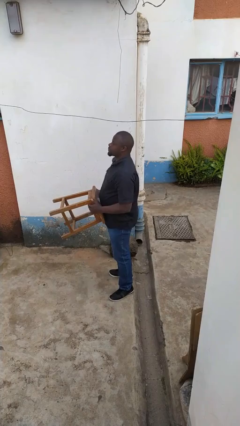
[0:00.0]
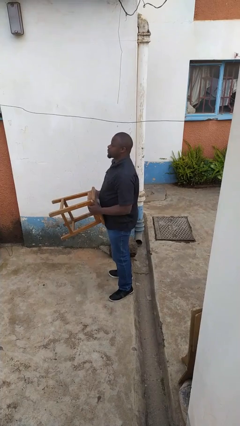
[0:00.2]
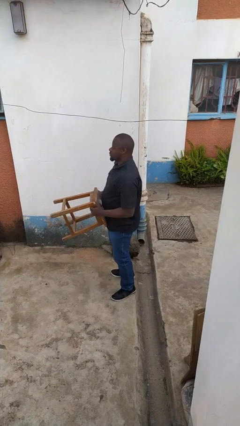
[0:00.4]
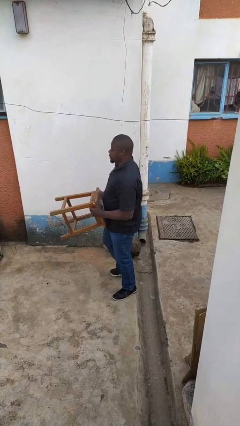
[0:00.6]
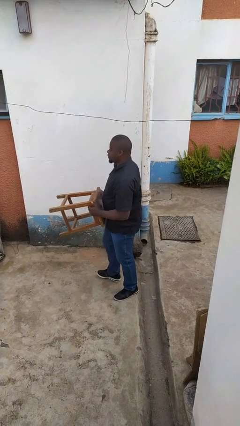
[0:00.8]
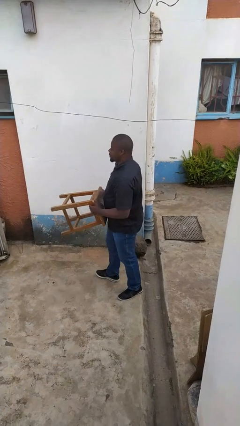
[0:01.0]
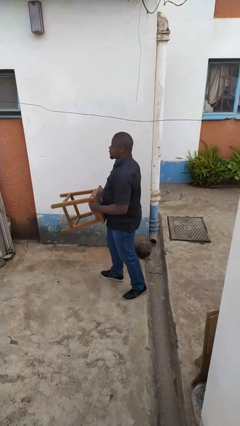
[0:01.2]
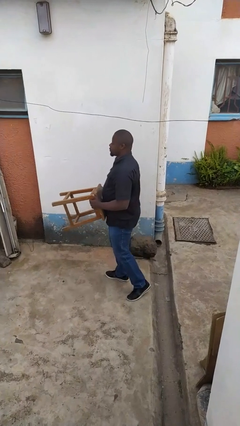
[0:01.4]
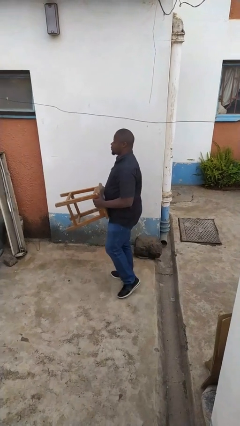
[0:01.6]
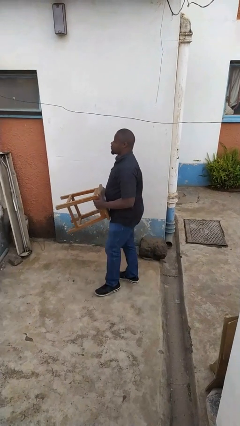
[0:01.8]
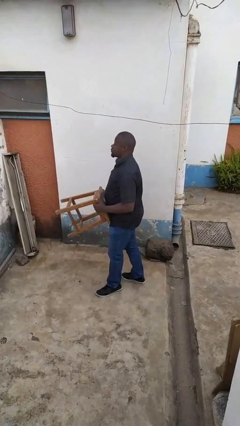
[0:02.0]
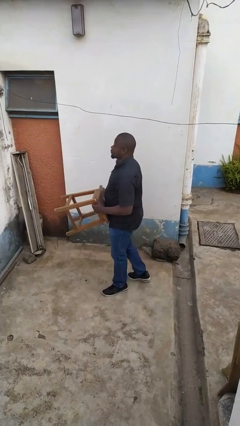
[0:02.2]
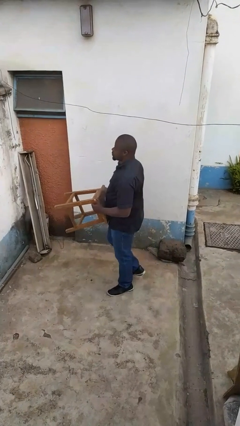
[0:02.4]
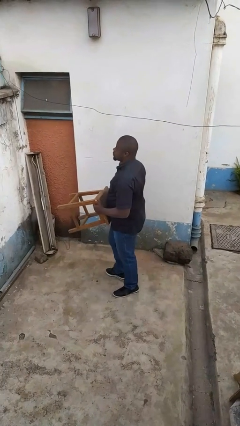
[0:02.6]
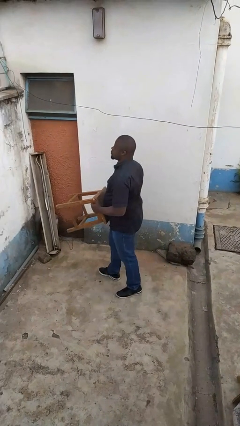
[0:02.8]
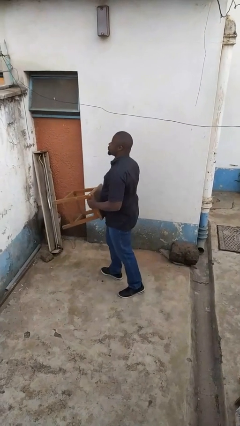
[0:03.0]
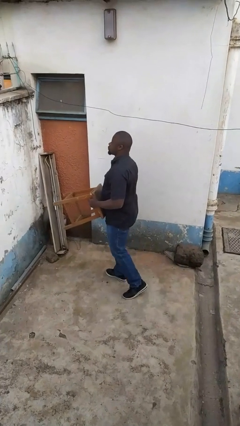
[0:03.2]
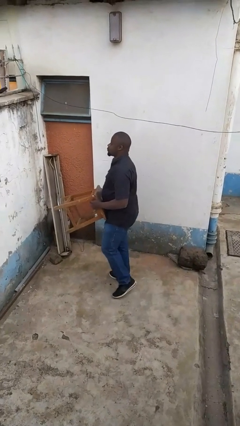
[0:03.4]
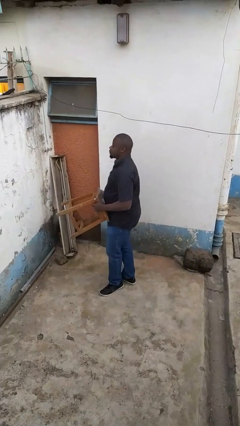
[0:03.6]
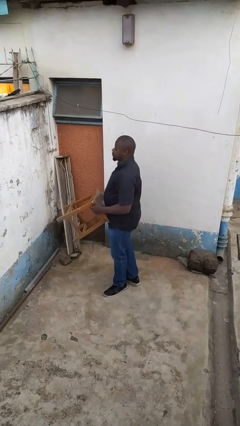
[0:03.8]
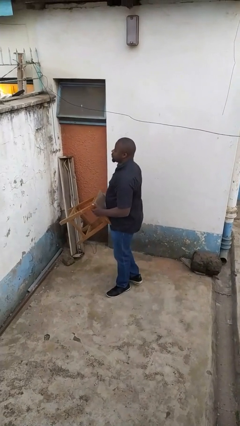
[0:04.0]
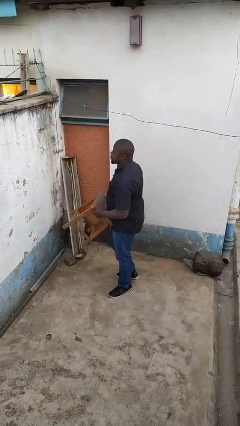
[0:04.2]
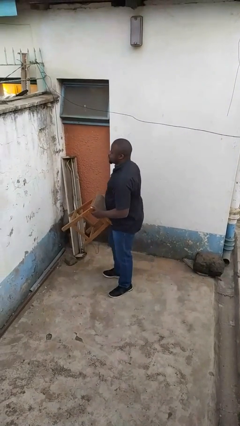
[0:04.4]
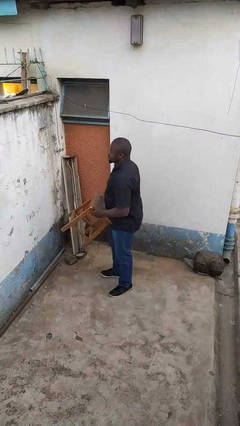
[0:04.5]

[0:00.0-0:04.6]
person carries furniture

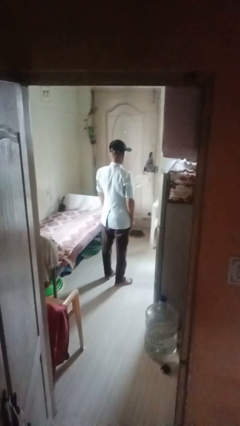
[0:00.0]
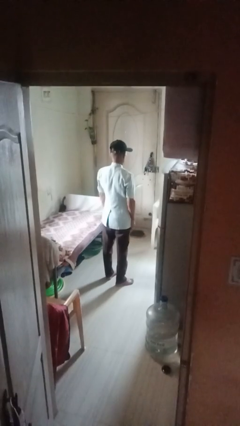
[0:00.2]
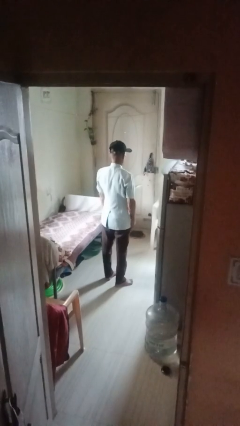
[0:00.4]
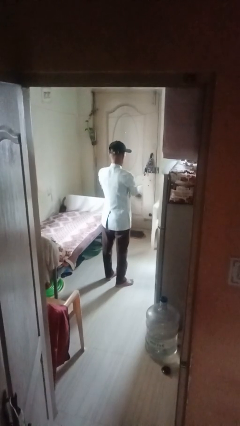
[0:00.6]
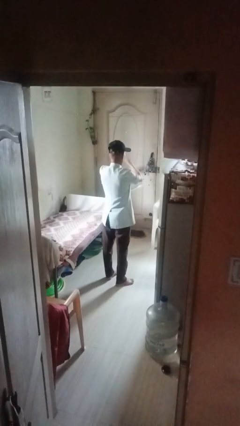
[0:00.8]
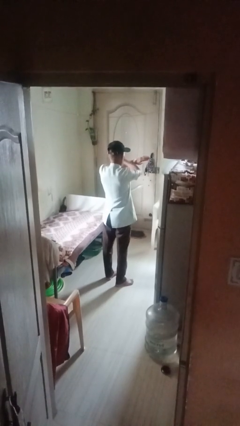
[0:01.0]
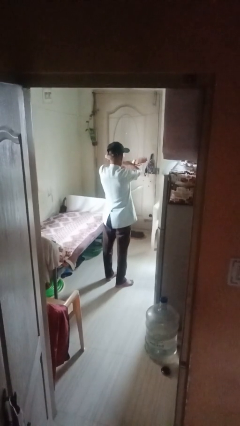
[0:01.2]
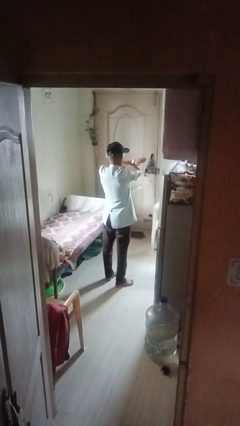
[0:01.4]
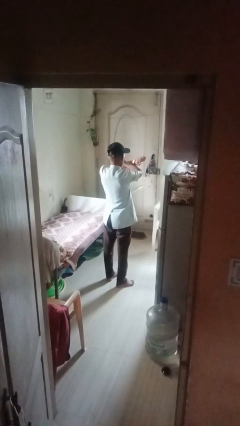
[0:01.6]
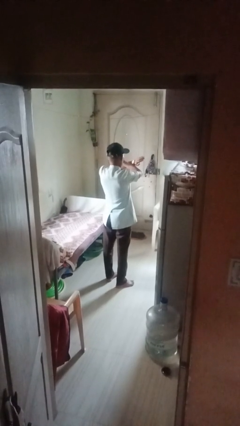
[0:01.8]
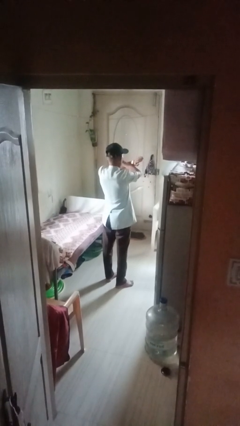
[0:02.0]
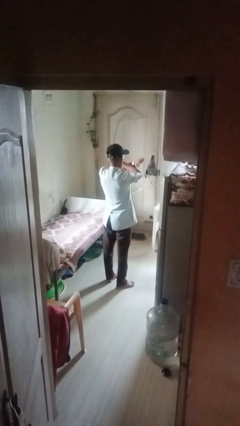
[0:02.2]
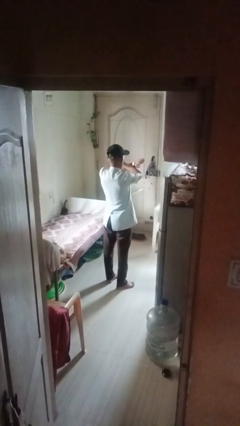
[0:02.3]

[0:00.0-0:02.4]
person gestures arms x

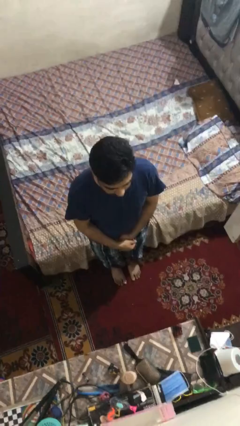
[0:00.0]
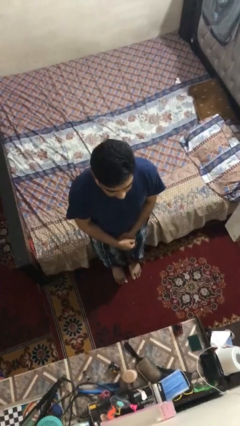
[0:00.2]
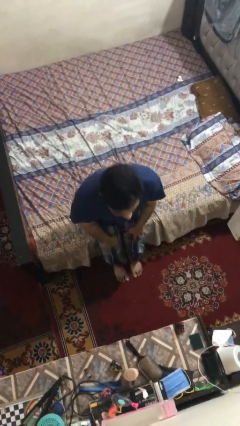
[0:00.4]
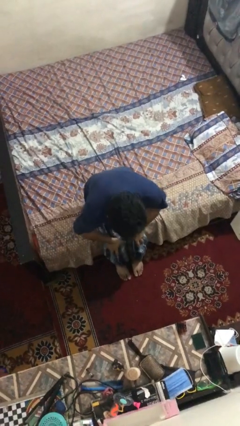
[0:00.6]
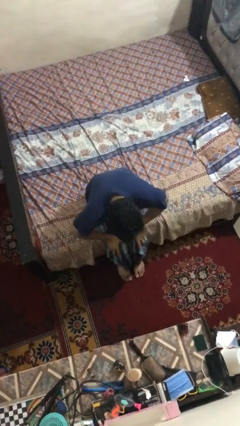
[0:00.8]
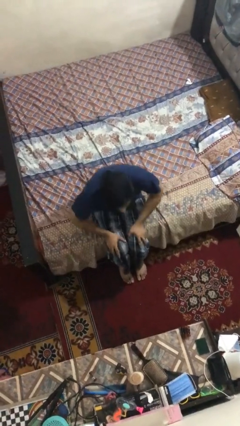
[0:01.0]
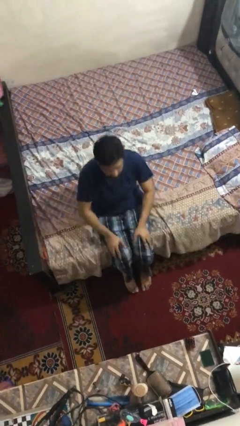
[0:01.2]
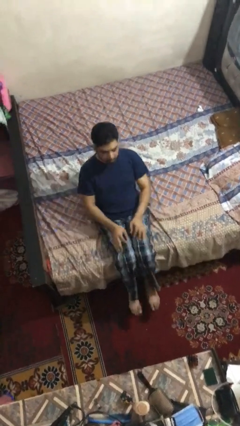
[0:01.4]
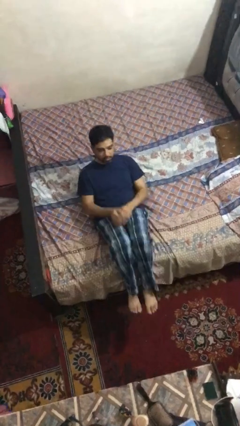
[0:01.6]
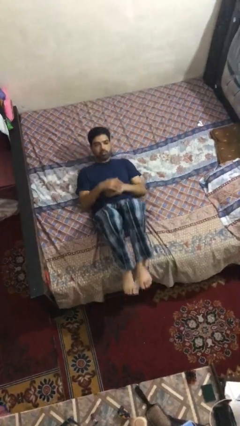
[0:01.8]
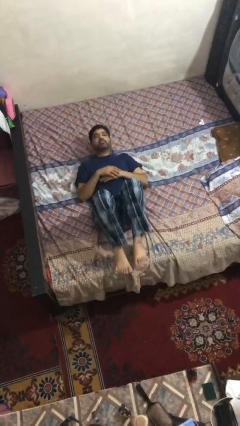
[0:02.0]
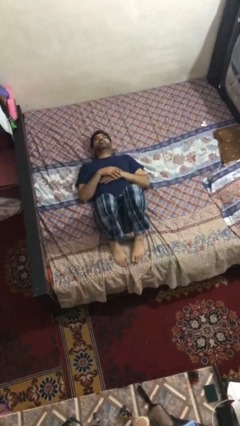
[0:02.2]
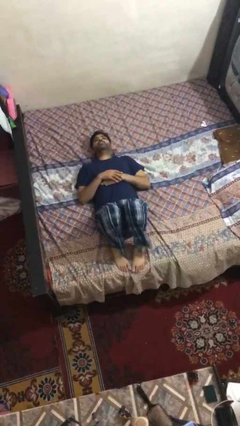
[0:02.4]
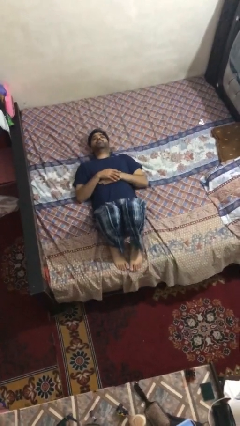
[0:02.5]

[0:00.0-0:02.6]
person lies down on bed

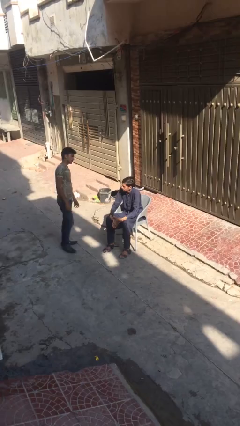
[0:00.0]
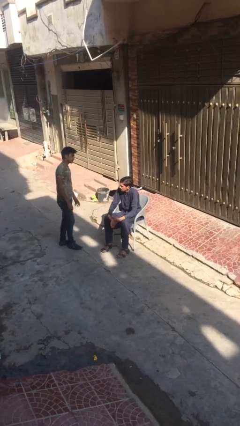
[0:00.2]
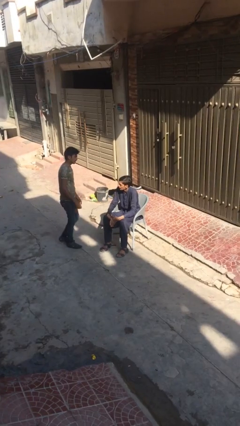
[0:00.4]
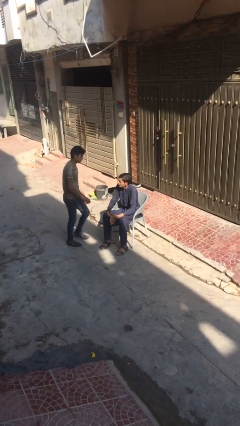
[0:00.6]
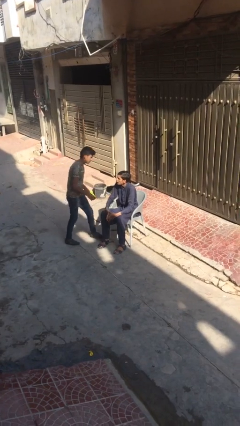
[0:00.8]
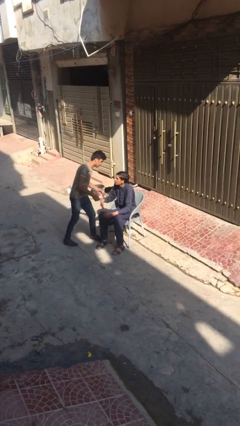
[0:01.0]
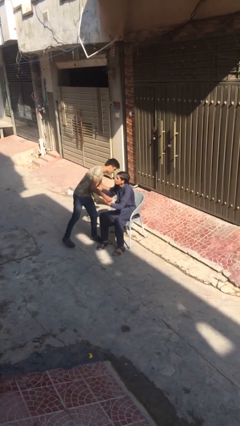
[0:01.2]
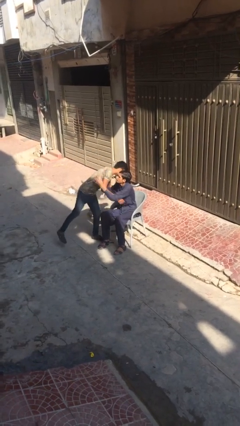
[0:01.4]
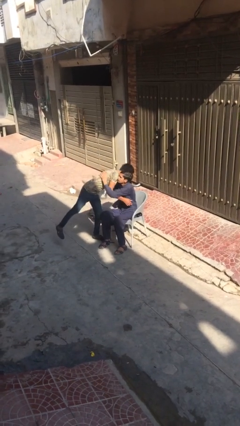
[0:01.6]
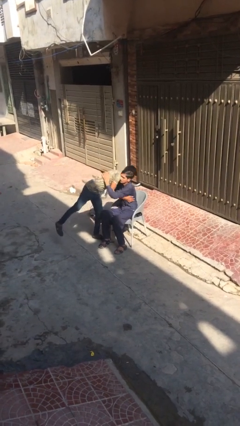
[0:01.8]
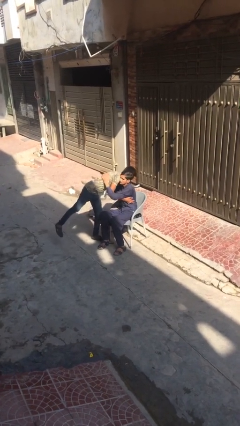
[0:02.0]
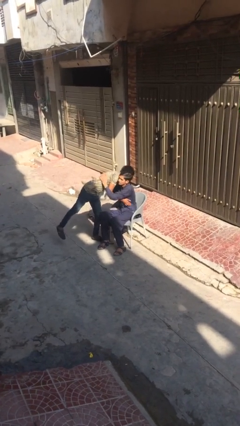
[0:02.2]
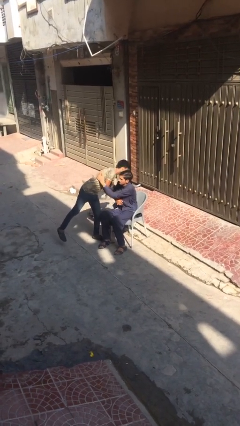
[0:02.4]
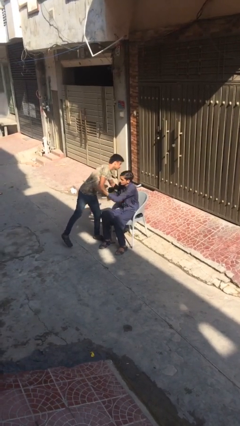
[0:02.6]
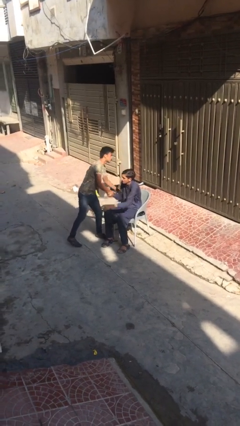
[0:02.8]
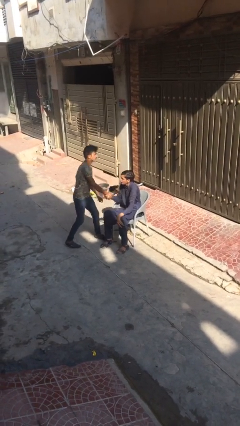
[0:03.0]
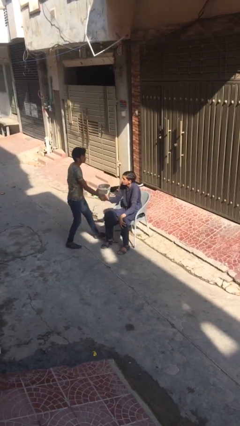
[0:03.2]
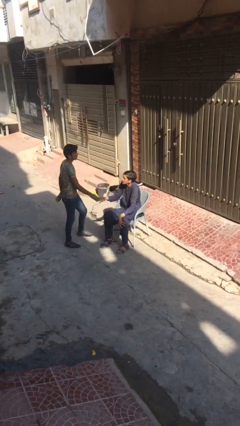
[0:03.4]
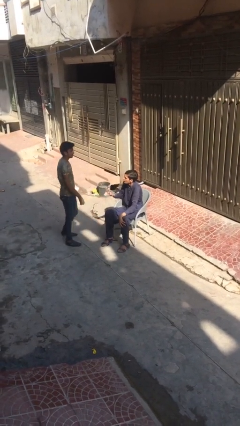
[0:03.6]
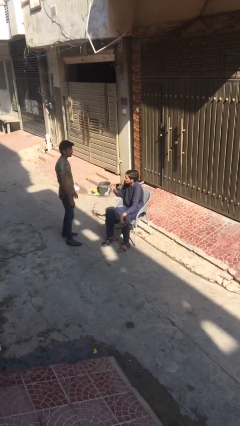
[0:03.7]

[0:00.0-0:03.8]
person embraces person

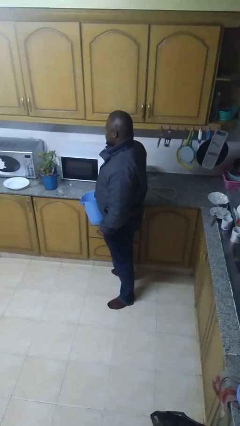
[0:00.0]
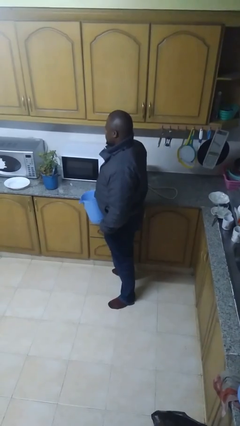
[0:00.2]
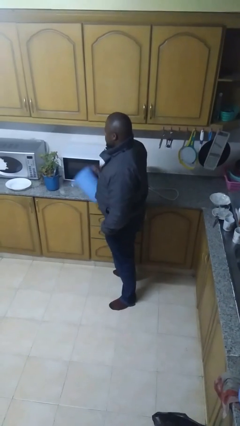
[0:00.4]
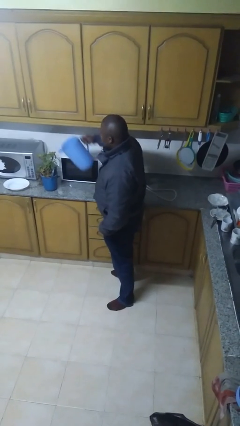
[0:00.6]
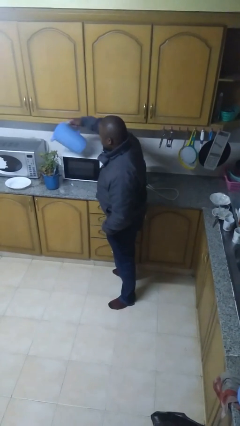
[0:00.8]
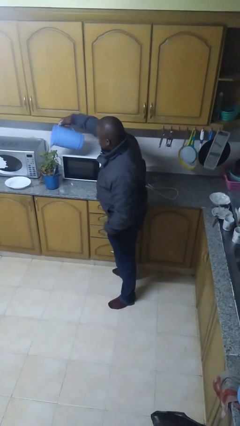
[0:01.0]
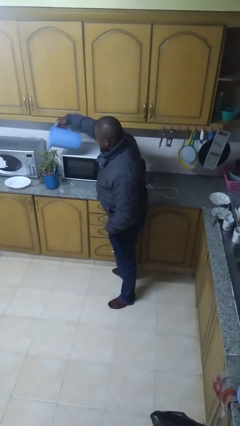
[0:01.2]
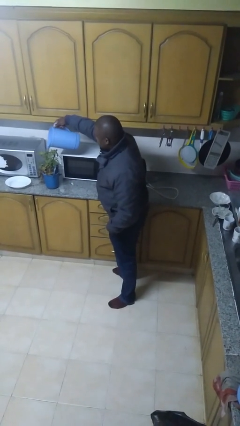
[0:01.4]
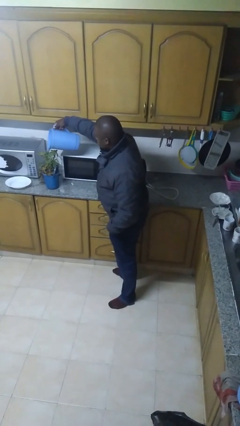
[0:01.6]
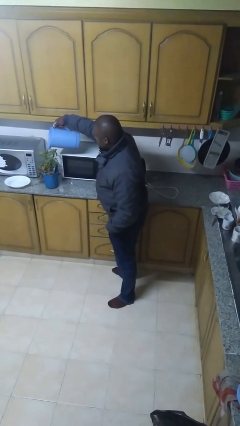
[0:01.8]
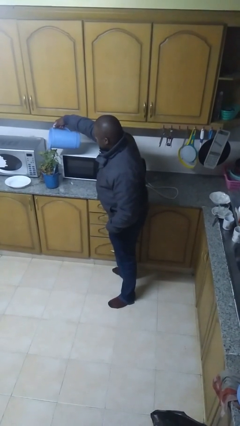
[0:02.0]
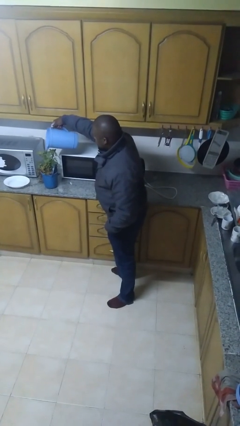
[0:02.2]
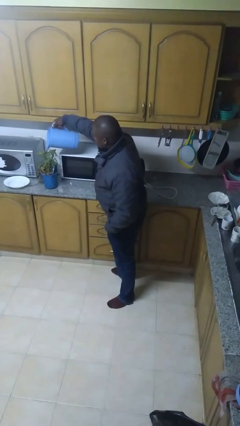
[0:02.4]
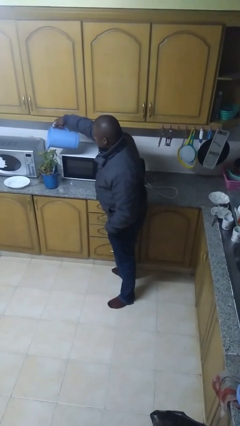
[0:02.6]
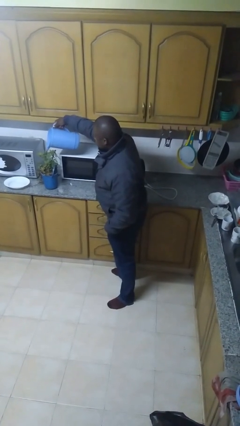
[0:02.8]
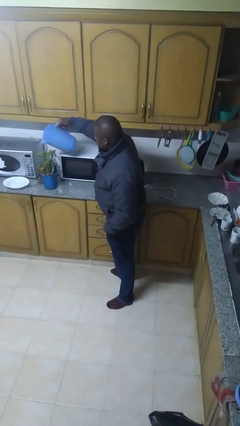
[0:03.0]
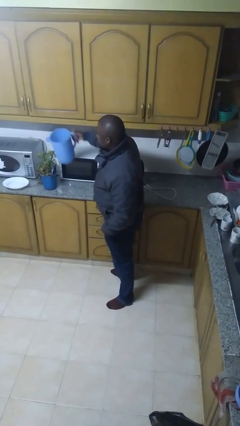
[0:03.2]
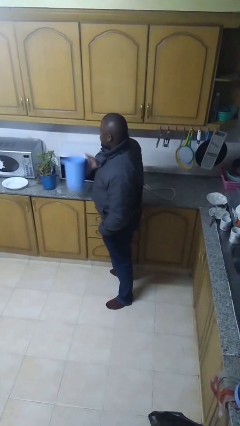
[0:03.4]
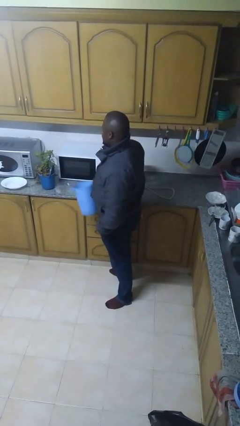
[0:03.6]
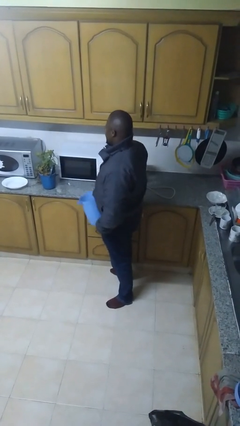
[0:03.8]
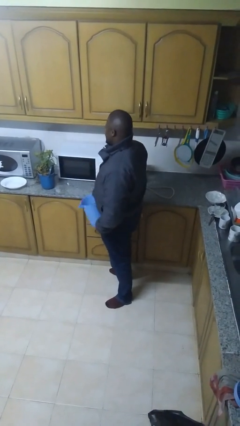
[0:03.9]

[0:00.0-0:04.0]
person waters houseplant

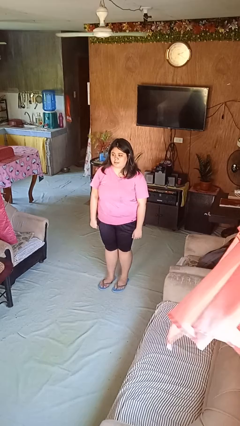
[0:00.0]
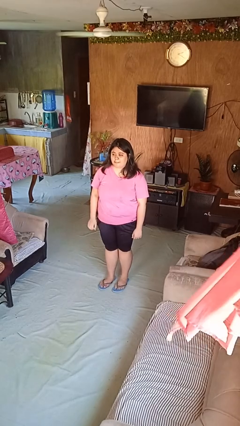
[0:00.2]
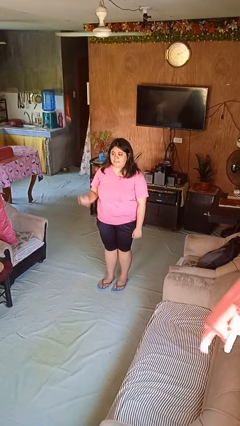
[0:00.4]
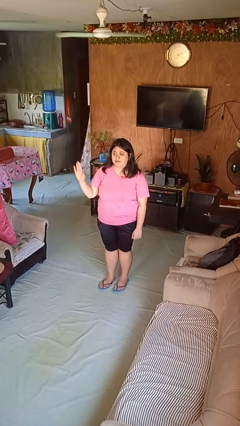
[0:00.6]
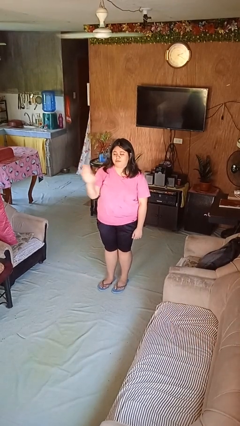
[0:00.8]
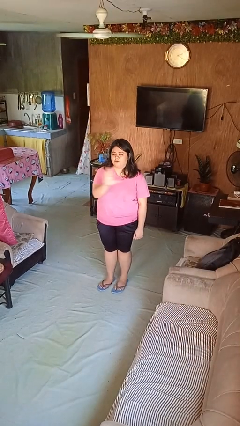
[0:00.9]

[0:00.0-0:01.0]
person gestures swipe left
